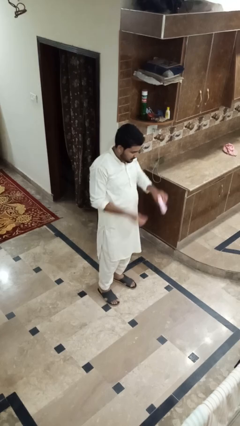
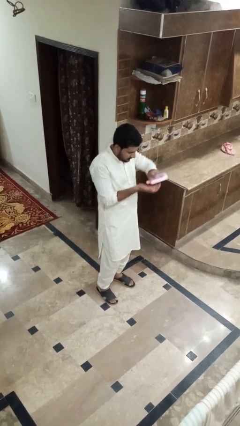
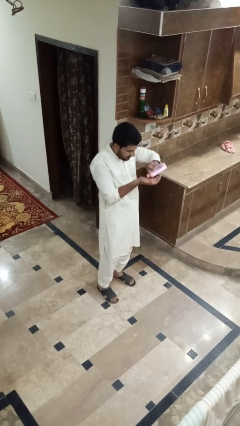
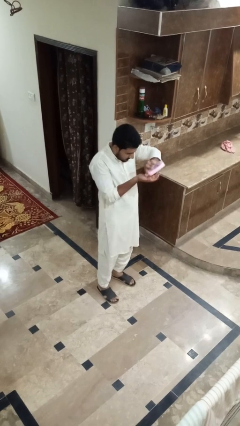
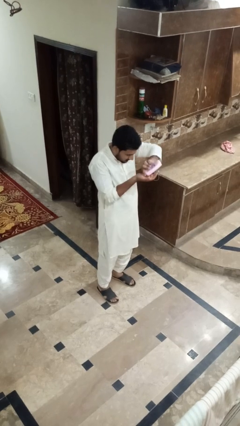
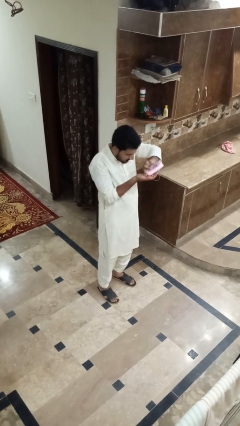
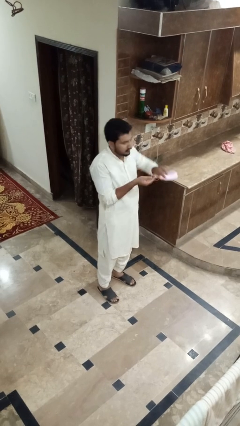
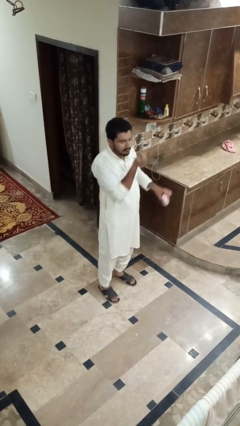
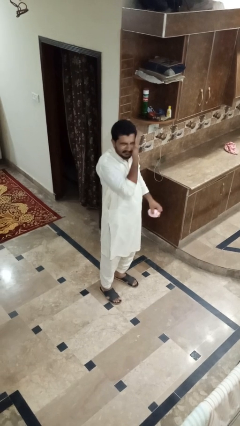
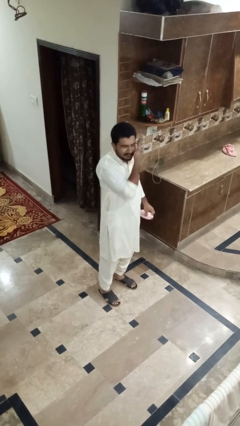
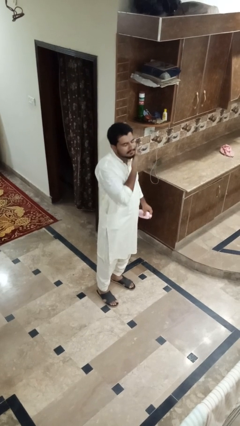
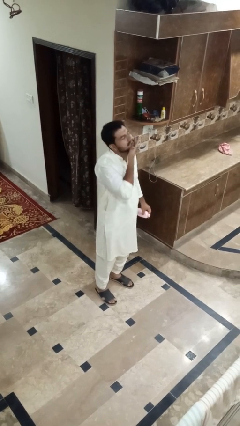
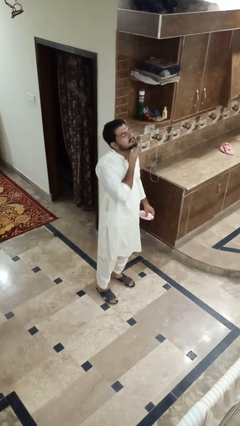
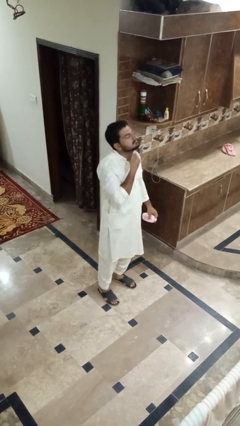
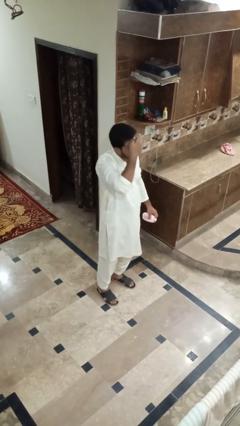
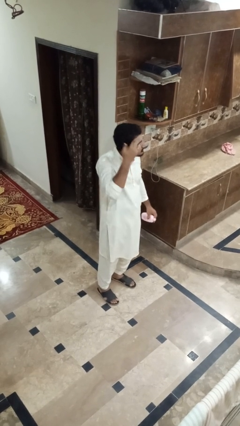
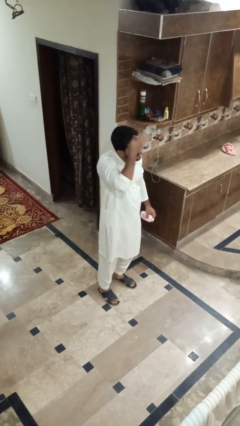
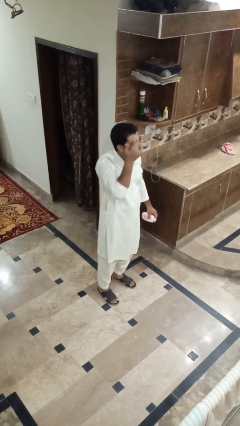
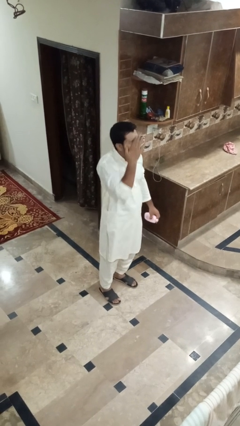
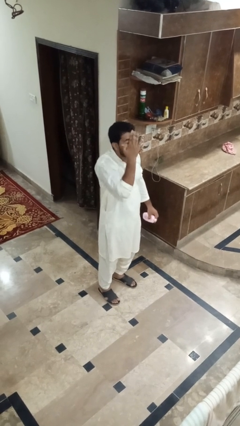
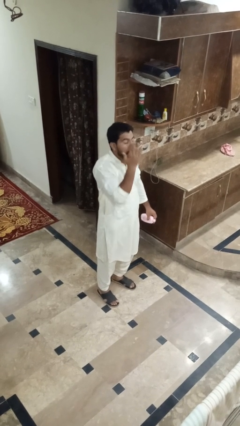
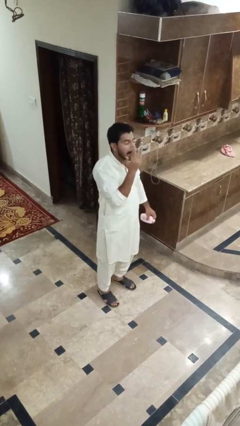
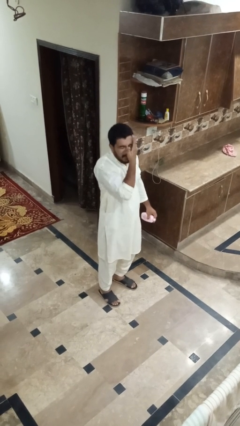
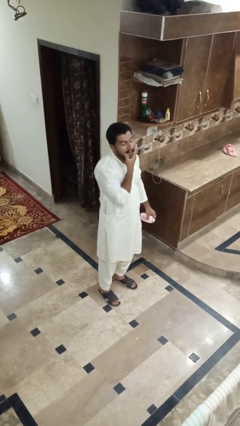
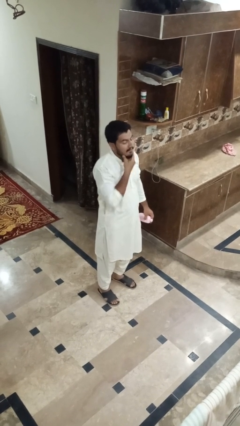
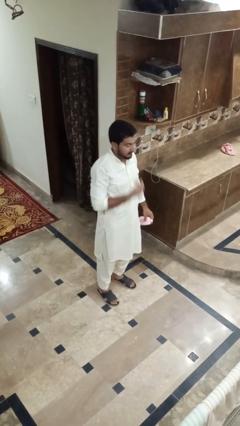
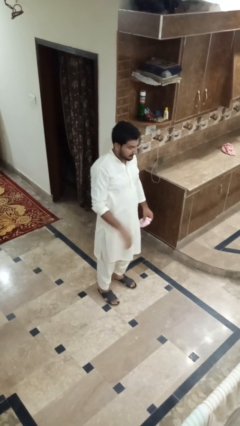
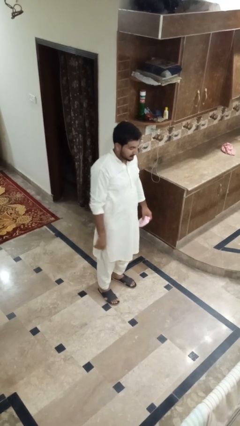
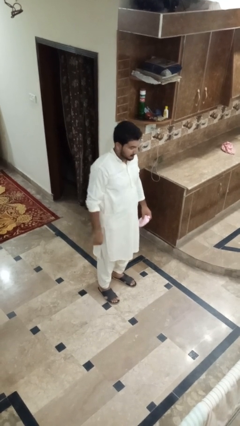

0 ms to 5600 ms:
person applies facial moisturizer

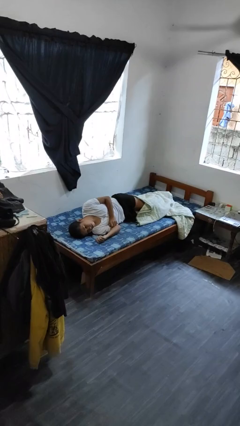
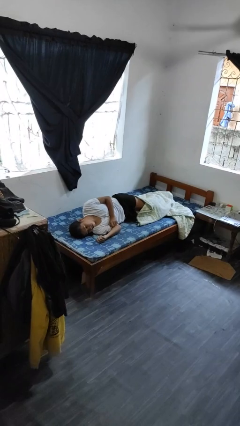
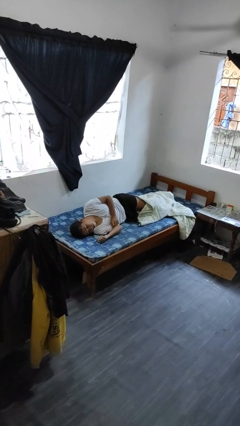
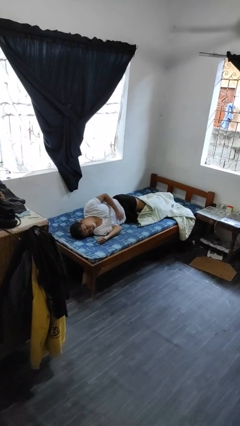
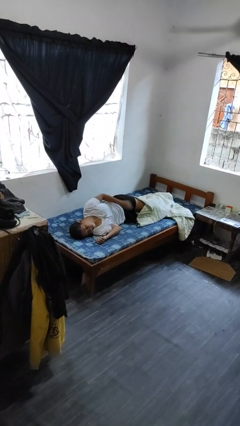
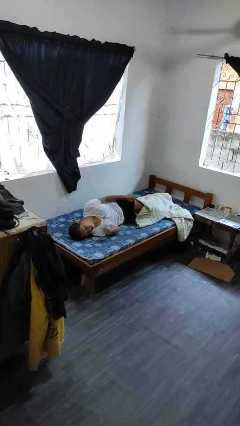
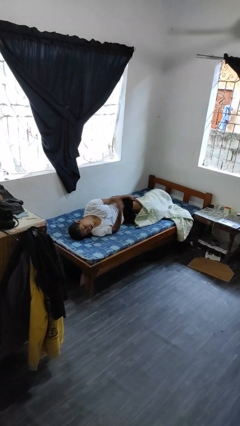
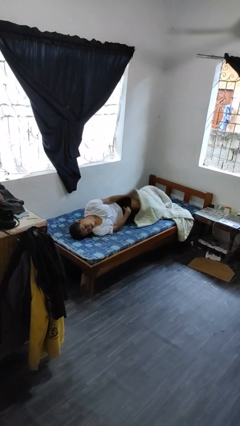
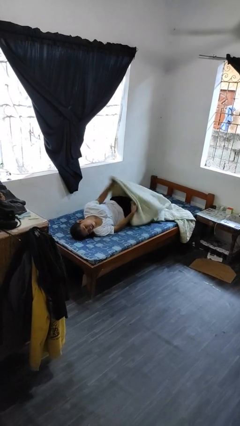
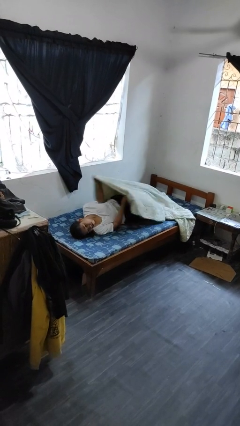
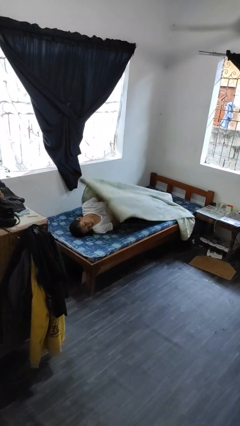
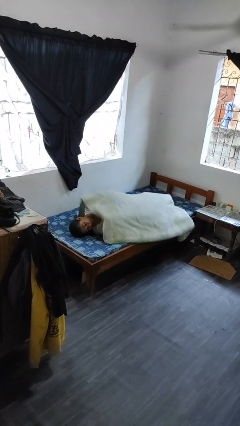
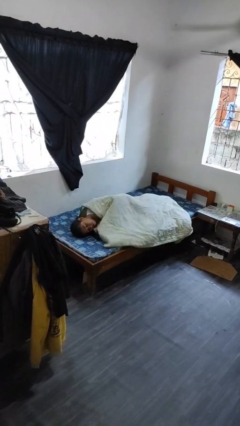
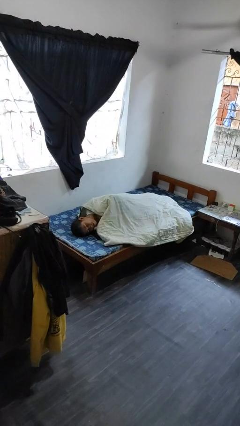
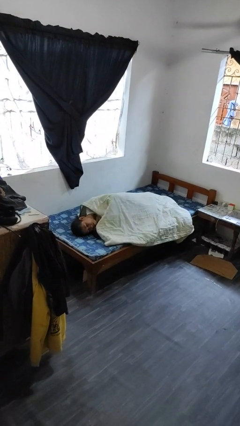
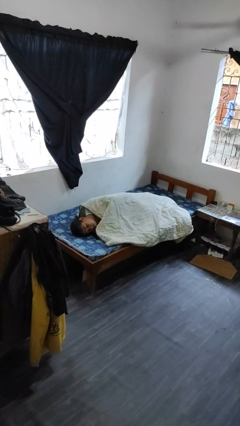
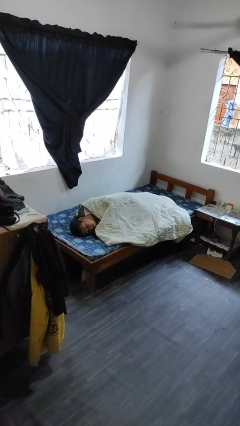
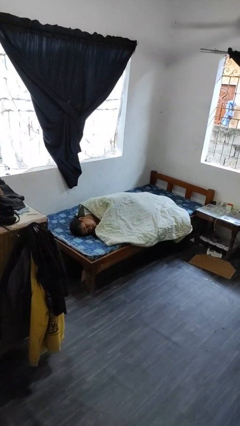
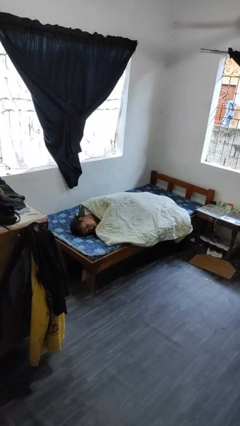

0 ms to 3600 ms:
person covers with bedsheets

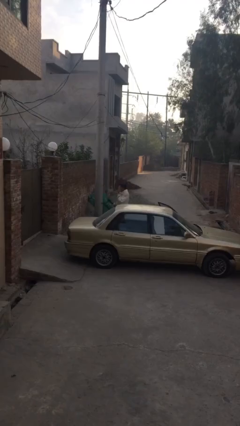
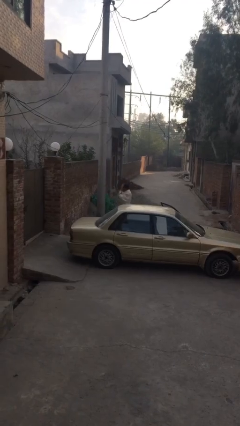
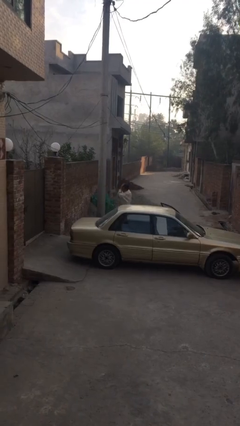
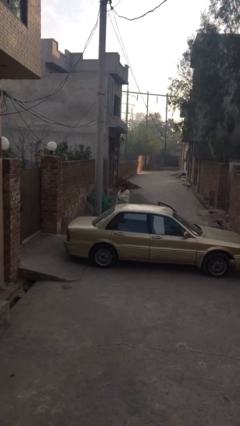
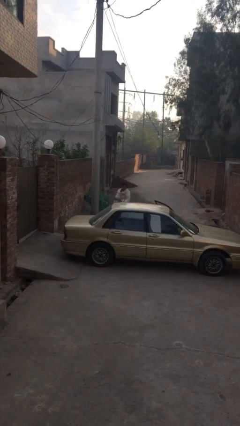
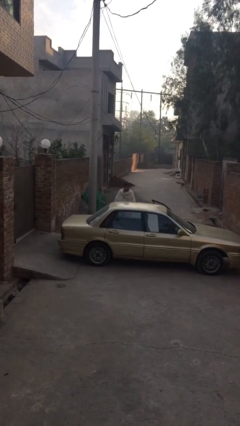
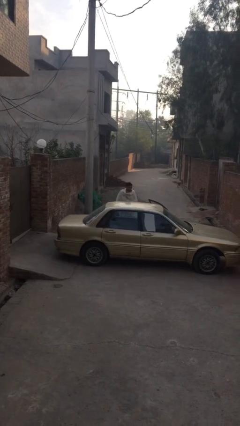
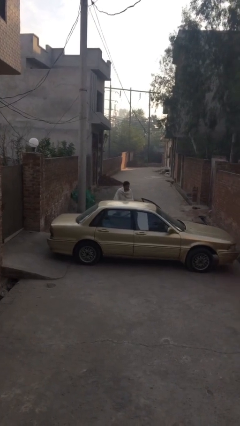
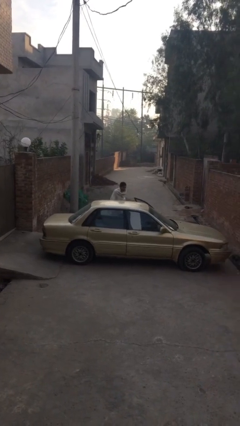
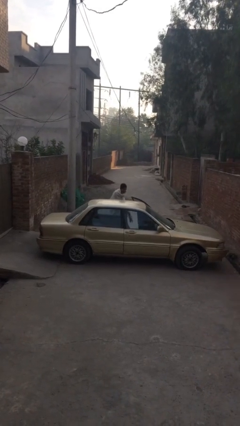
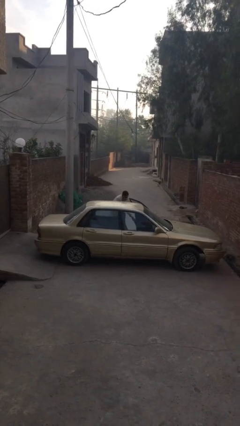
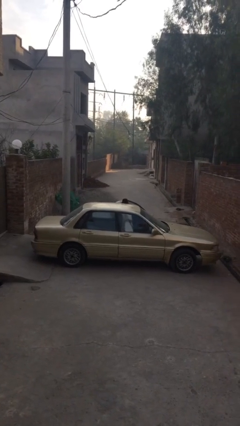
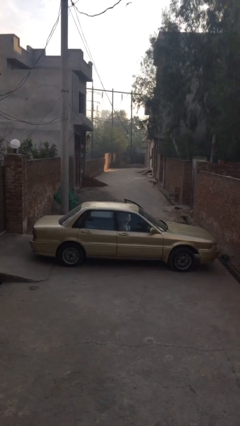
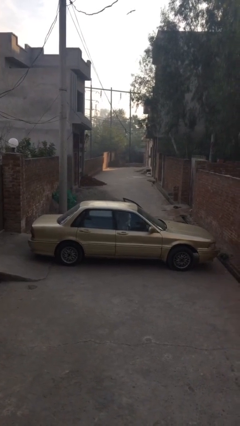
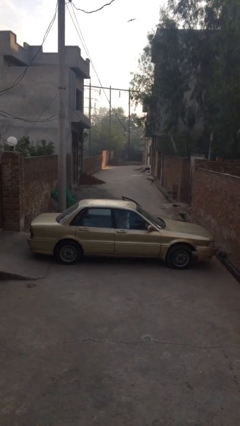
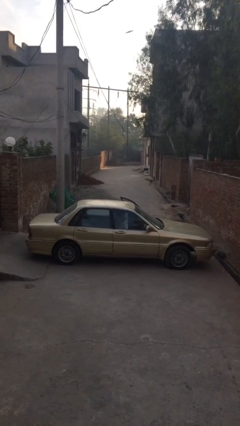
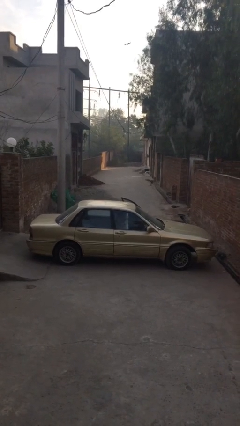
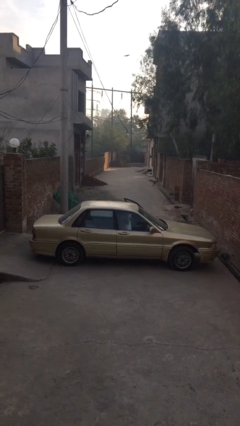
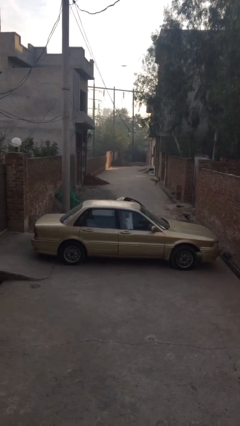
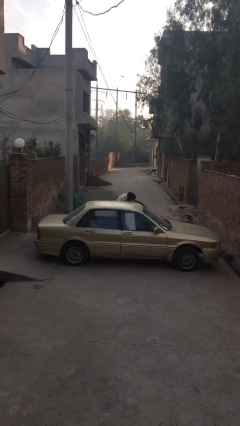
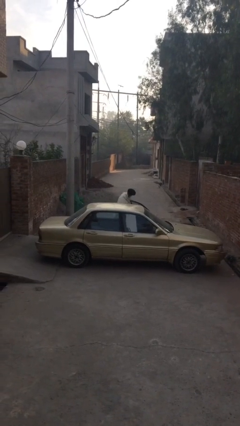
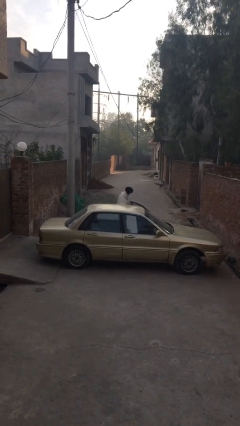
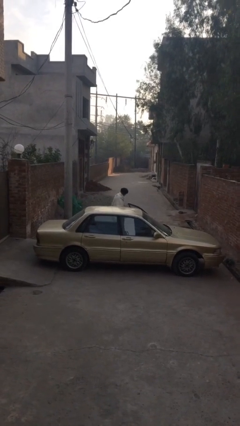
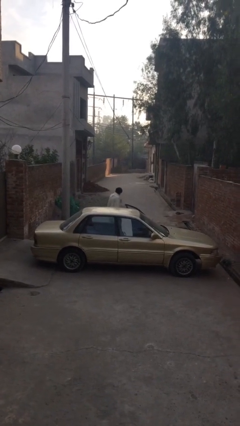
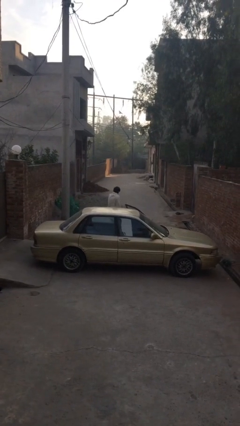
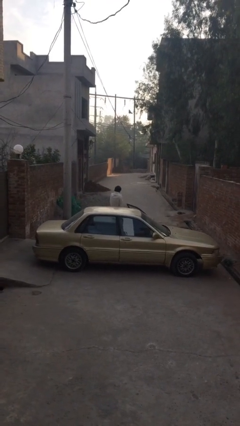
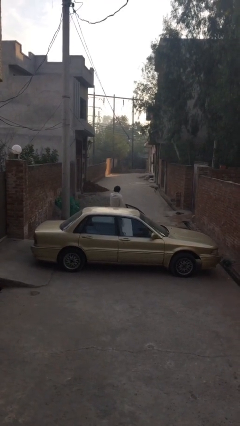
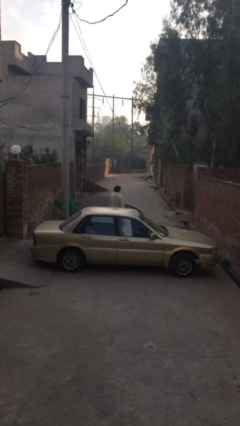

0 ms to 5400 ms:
person loads car

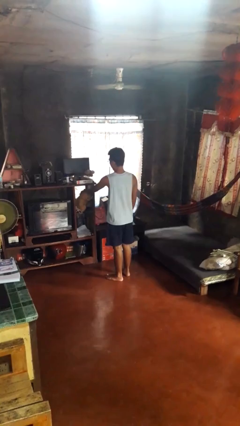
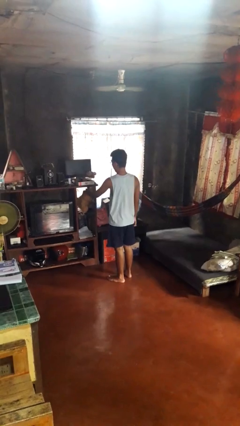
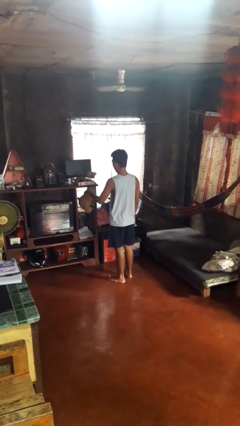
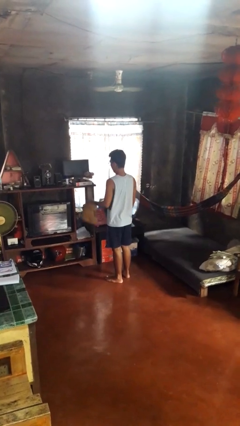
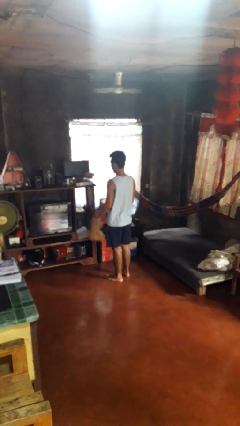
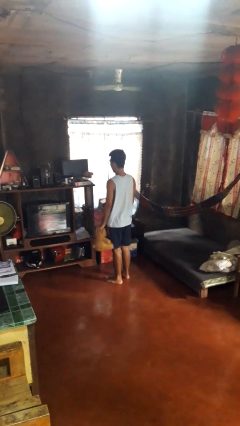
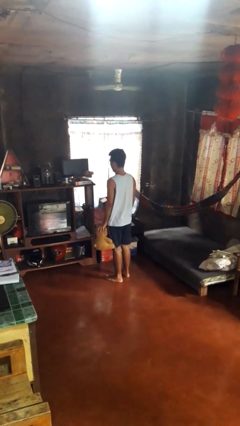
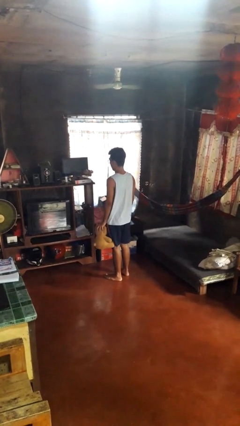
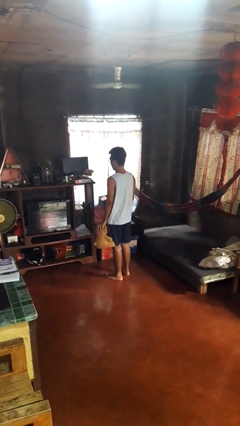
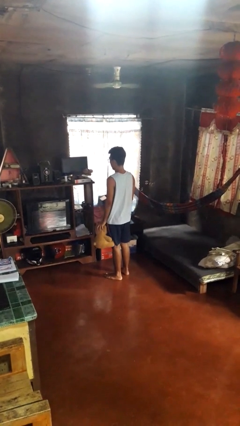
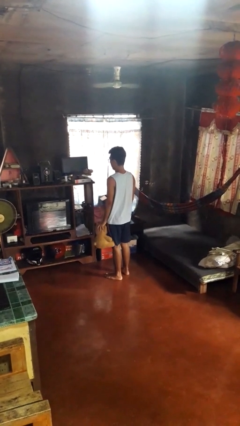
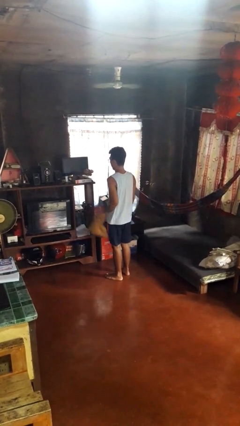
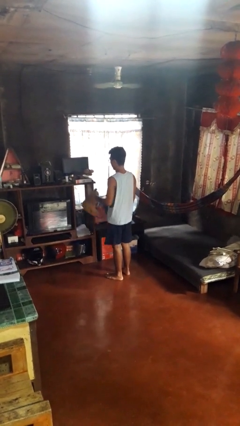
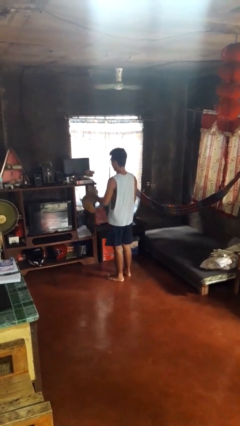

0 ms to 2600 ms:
person picks up object from cabinet

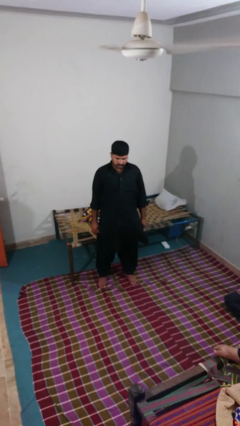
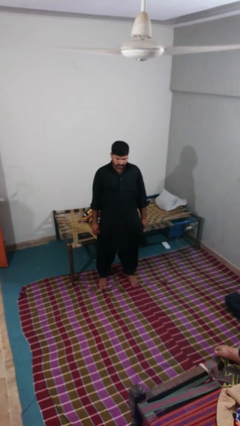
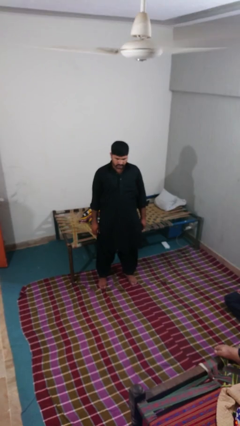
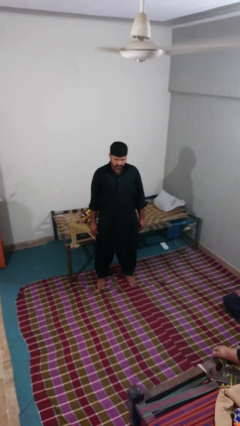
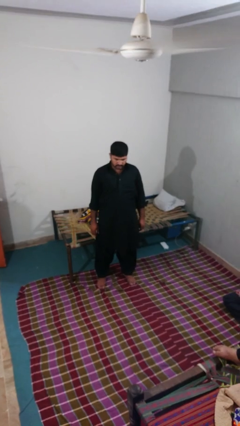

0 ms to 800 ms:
person gestures swipe right

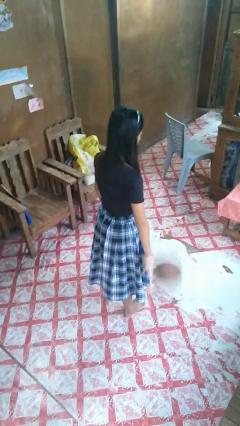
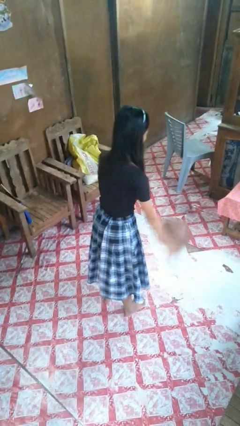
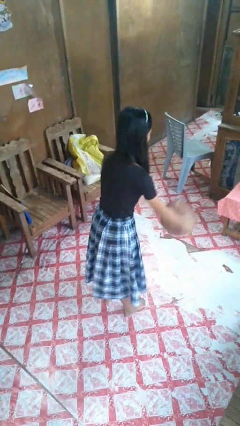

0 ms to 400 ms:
person bounces ball on floor
